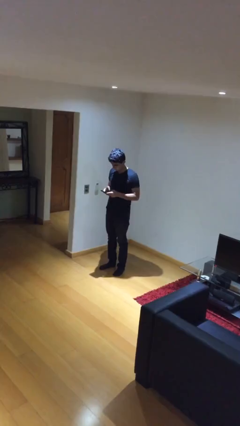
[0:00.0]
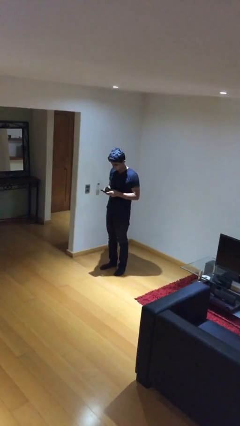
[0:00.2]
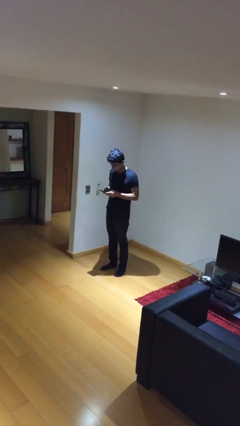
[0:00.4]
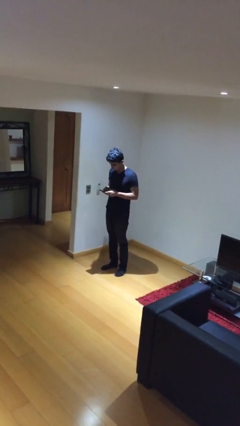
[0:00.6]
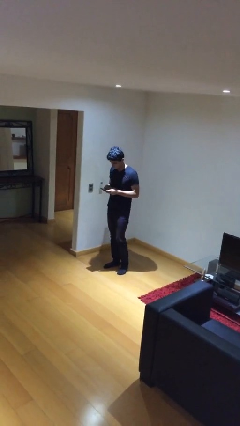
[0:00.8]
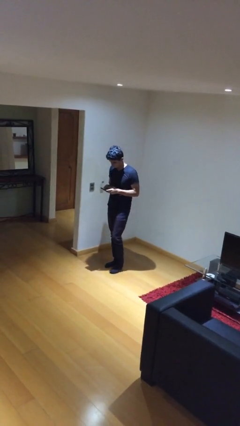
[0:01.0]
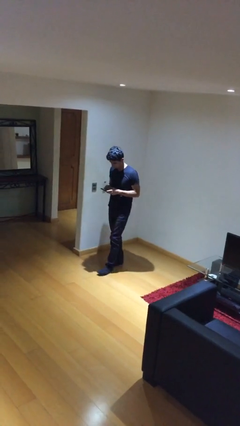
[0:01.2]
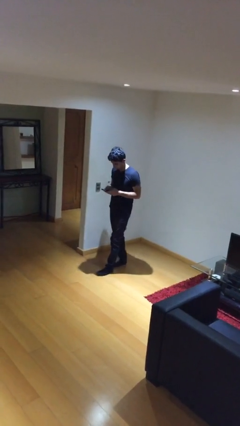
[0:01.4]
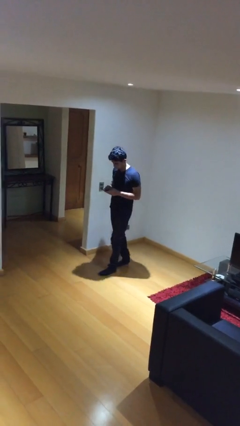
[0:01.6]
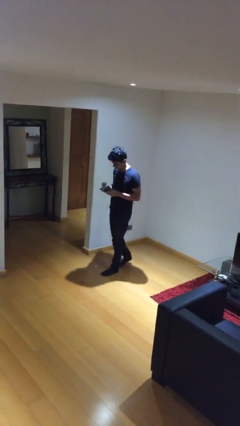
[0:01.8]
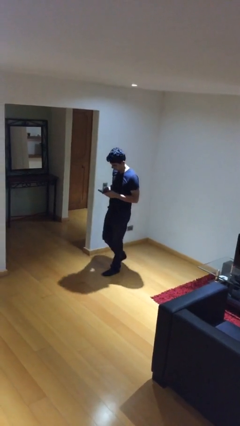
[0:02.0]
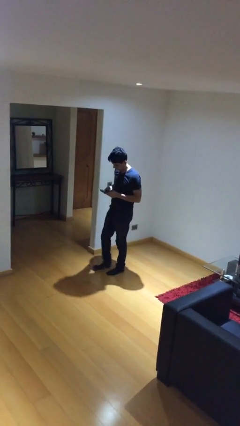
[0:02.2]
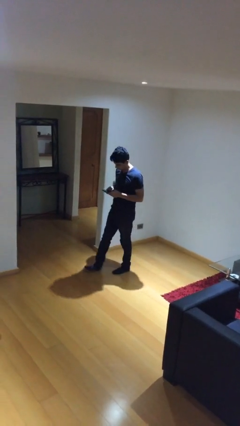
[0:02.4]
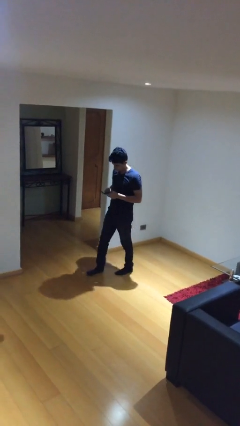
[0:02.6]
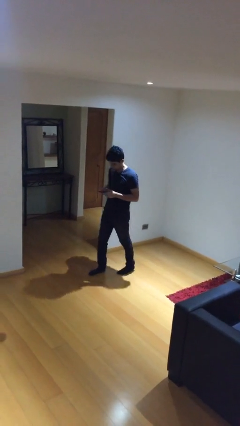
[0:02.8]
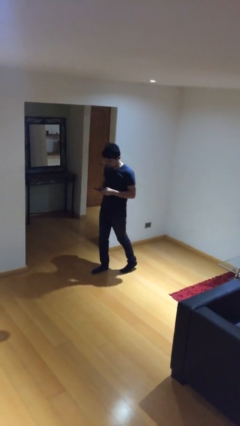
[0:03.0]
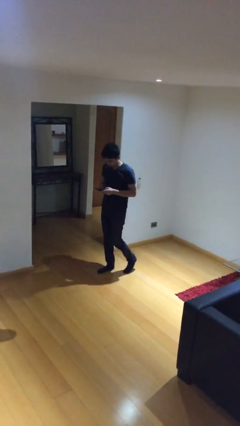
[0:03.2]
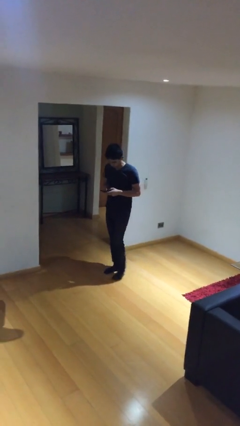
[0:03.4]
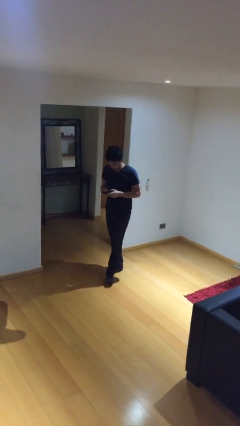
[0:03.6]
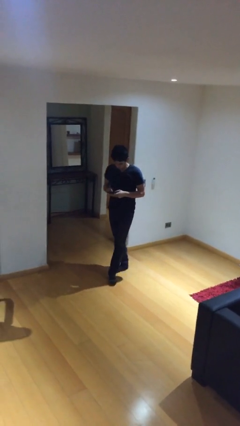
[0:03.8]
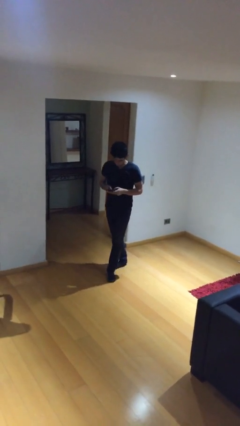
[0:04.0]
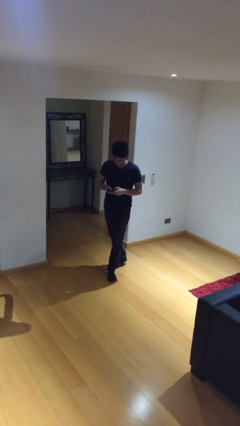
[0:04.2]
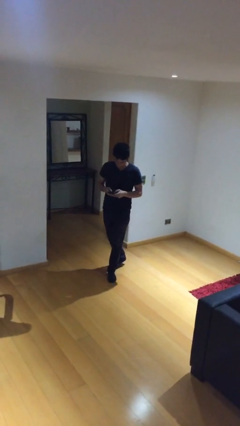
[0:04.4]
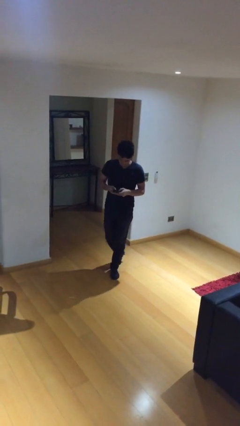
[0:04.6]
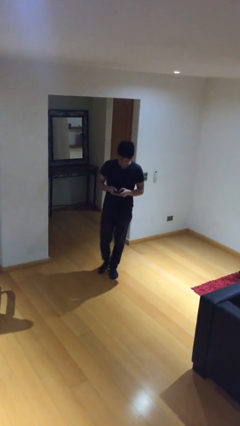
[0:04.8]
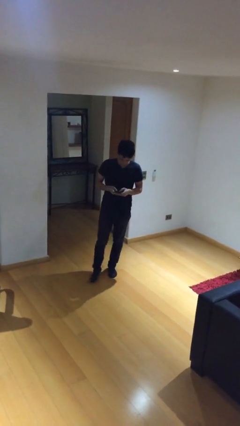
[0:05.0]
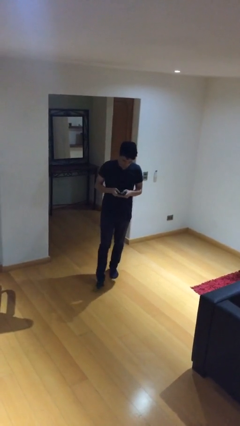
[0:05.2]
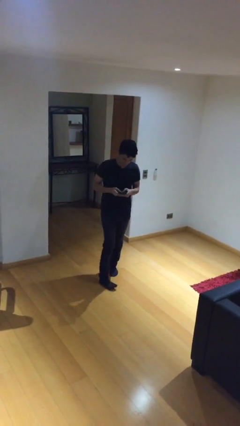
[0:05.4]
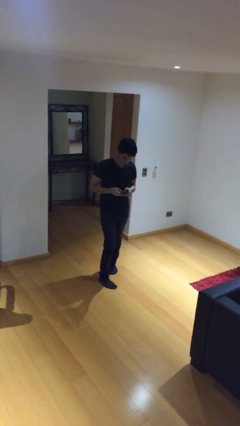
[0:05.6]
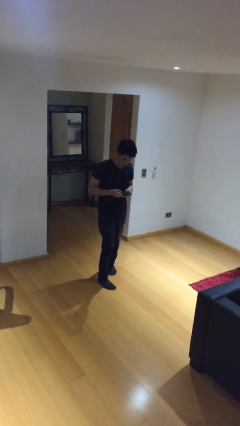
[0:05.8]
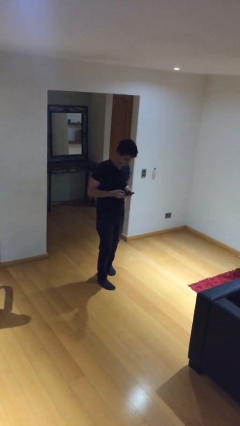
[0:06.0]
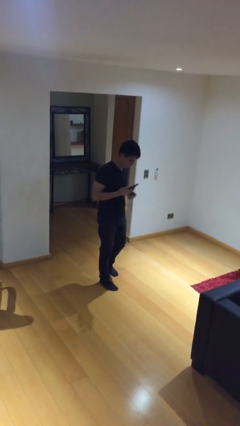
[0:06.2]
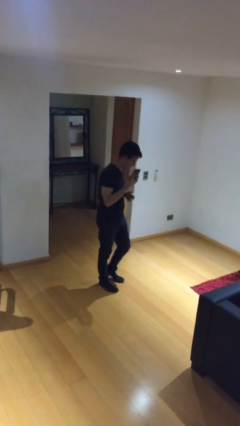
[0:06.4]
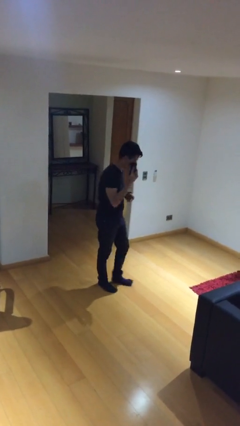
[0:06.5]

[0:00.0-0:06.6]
person texts on phone

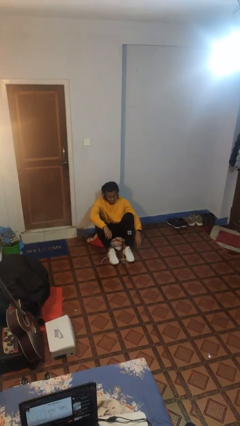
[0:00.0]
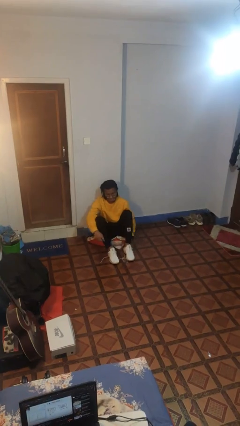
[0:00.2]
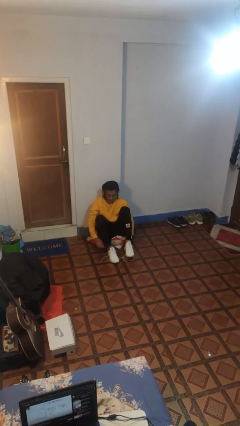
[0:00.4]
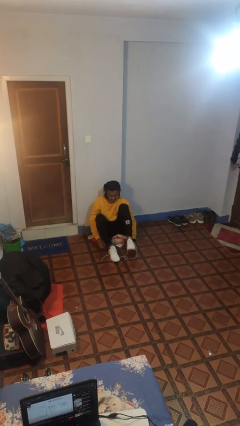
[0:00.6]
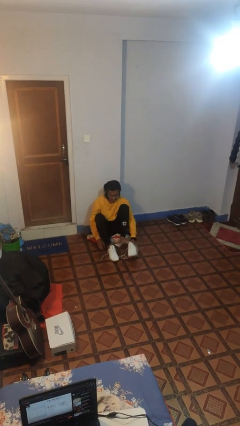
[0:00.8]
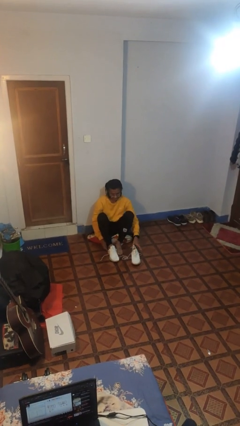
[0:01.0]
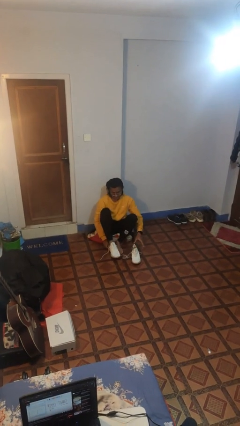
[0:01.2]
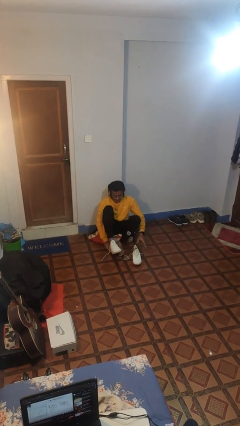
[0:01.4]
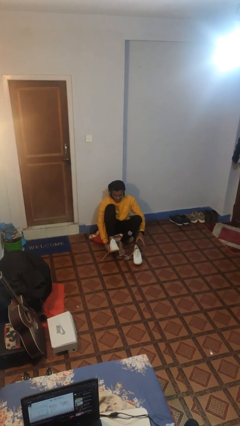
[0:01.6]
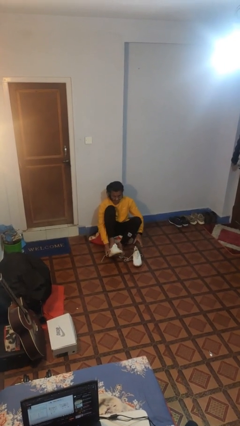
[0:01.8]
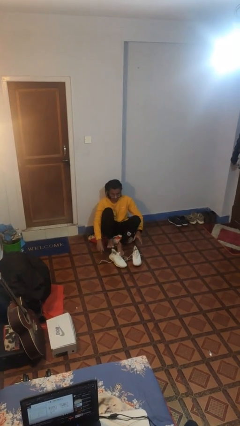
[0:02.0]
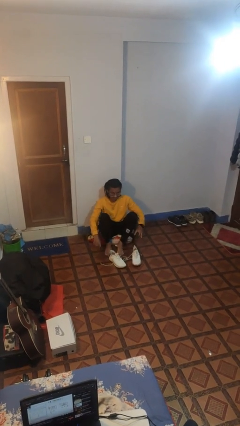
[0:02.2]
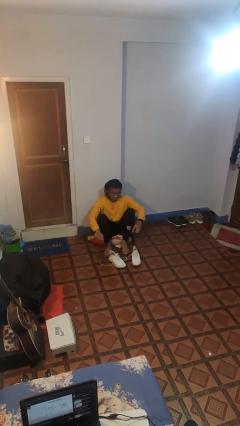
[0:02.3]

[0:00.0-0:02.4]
person takes off shoes

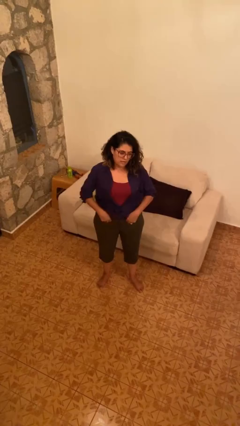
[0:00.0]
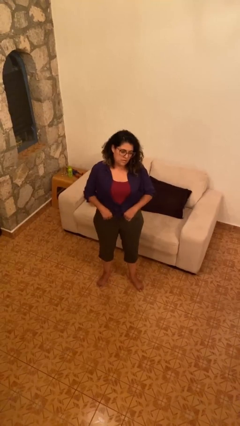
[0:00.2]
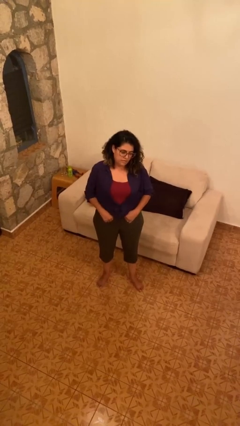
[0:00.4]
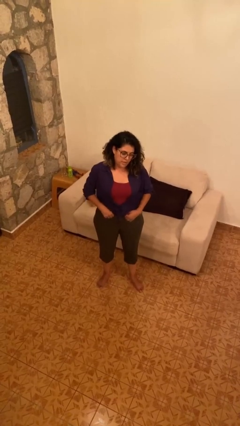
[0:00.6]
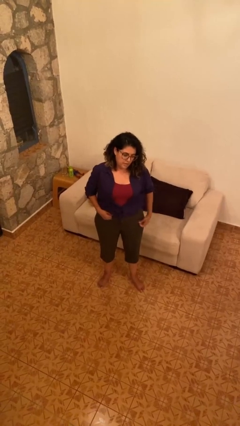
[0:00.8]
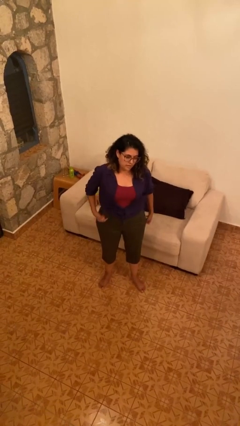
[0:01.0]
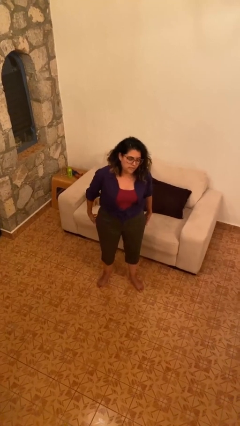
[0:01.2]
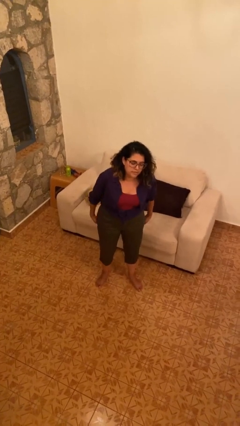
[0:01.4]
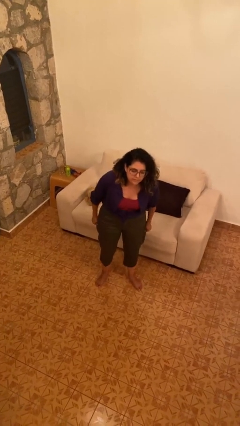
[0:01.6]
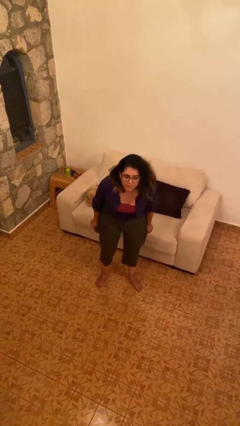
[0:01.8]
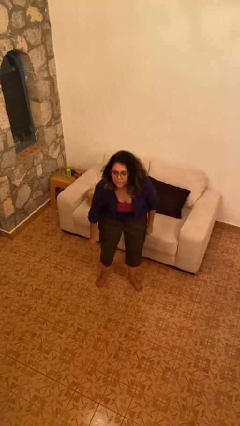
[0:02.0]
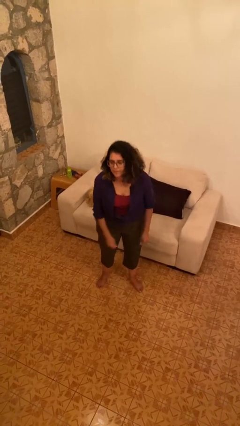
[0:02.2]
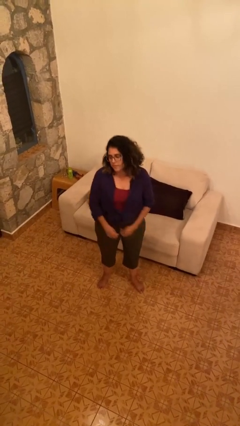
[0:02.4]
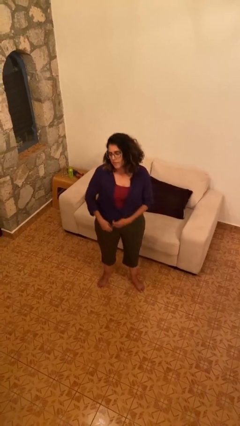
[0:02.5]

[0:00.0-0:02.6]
person hikes up pants

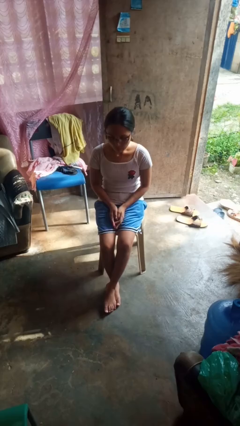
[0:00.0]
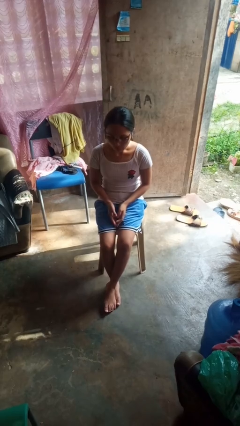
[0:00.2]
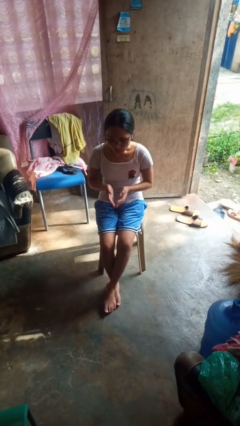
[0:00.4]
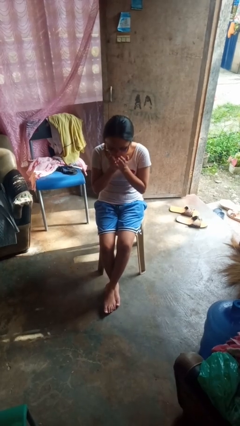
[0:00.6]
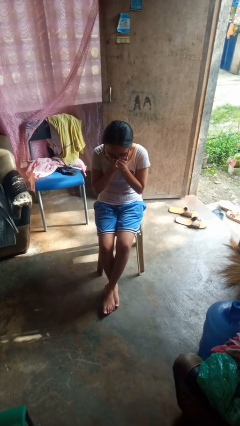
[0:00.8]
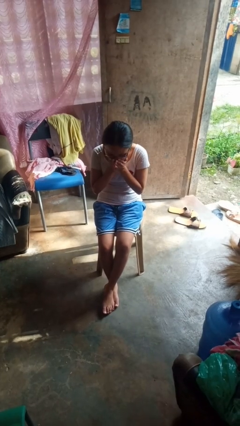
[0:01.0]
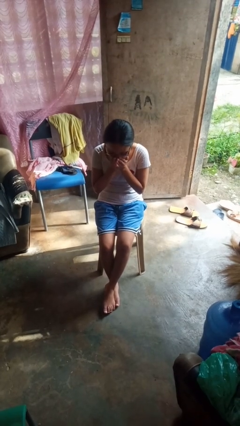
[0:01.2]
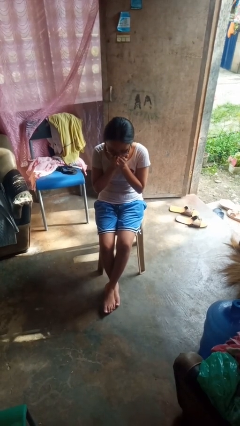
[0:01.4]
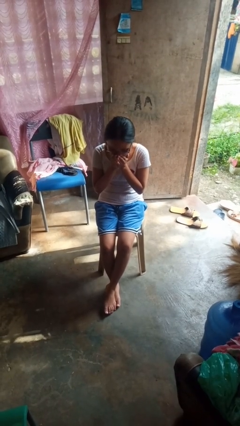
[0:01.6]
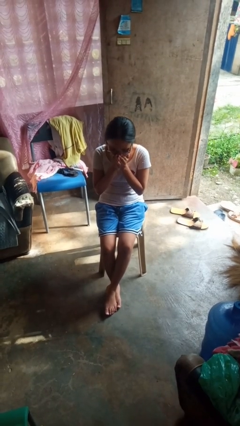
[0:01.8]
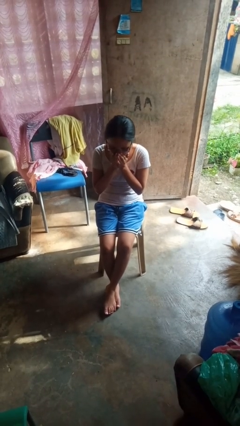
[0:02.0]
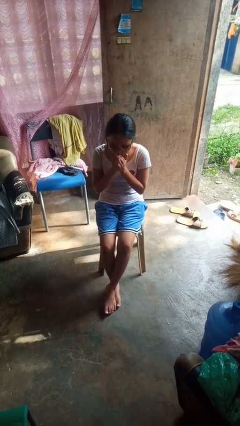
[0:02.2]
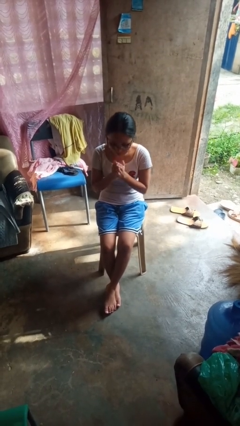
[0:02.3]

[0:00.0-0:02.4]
person sneezes into hand

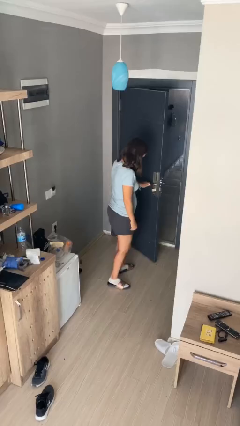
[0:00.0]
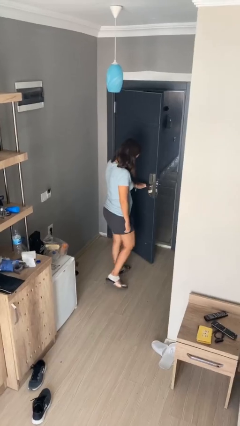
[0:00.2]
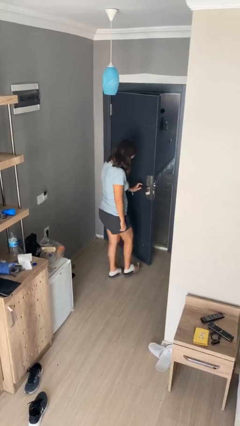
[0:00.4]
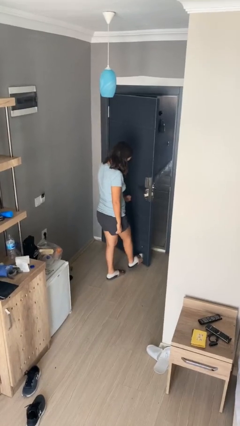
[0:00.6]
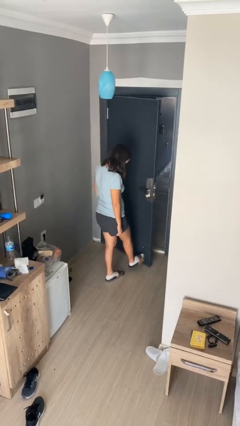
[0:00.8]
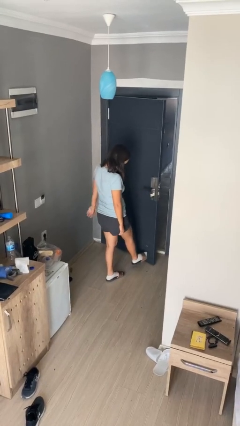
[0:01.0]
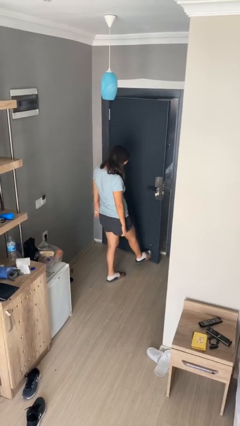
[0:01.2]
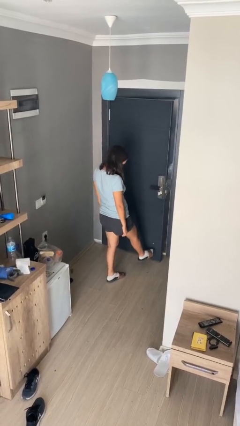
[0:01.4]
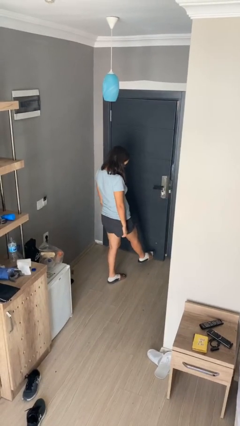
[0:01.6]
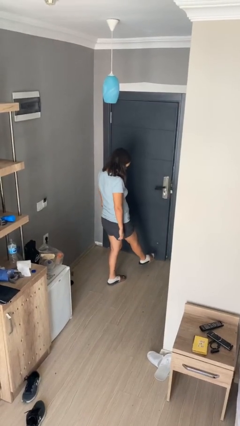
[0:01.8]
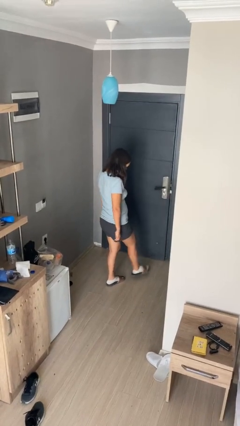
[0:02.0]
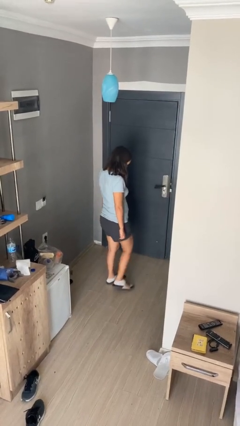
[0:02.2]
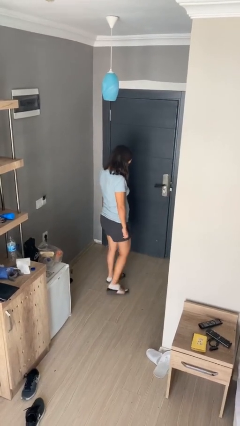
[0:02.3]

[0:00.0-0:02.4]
person closes door with foot

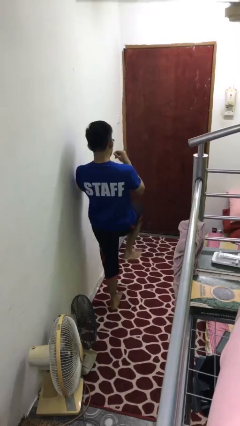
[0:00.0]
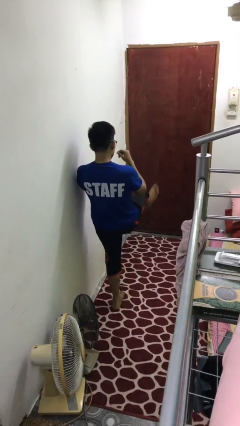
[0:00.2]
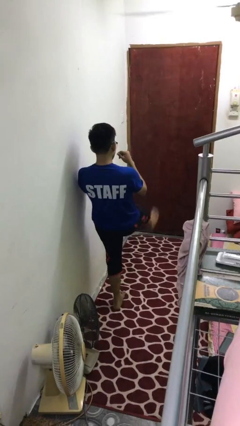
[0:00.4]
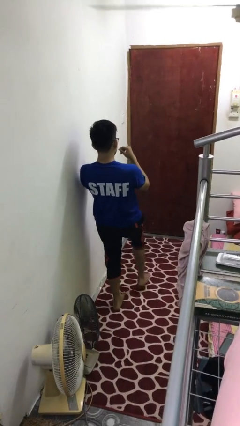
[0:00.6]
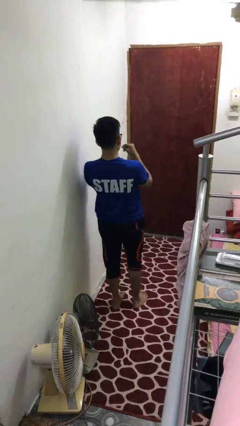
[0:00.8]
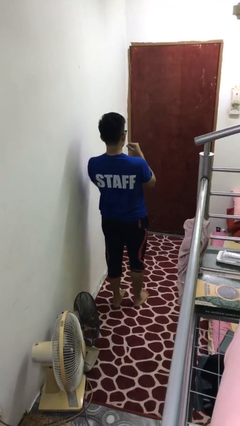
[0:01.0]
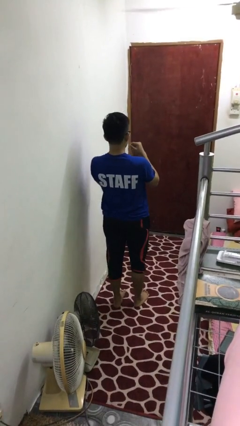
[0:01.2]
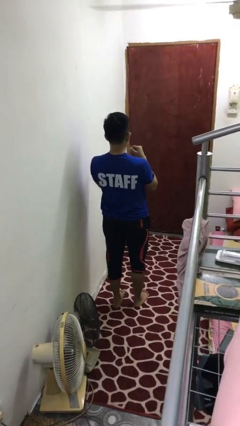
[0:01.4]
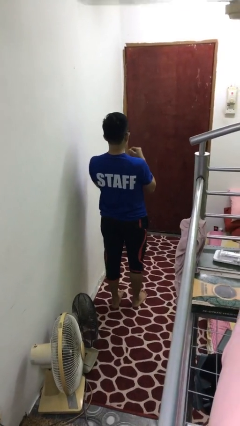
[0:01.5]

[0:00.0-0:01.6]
person karate kicks
